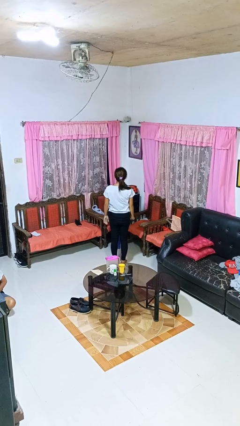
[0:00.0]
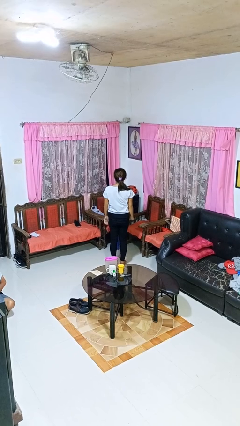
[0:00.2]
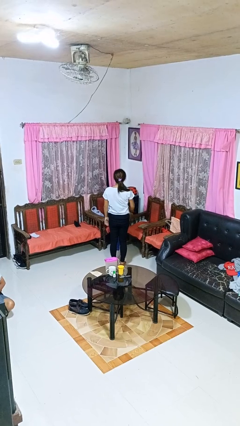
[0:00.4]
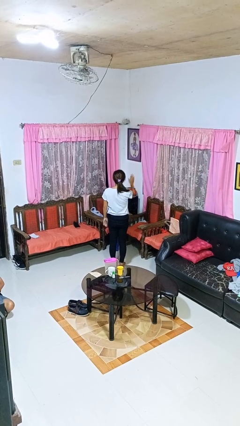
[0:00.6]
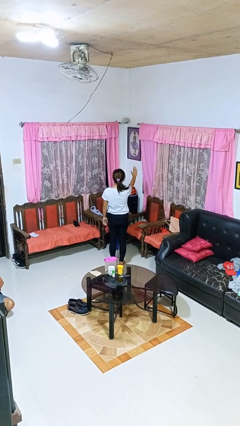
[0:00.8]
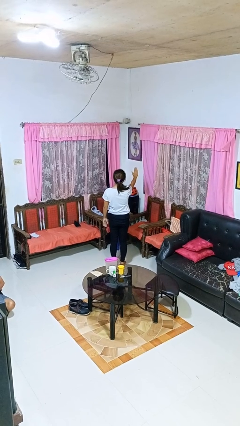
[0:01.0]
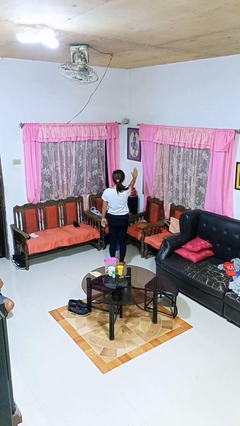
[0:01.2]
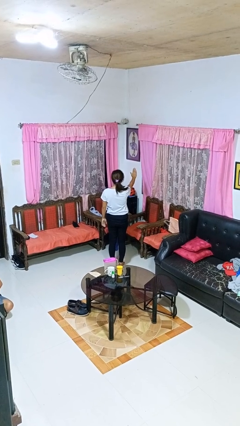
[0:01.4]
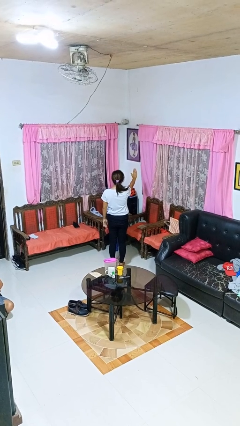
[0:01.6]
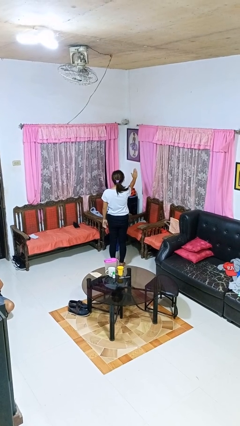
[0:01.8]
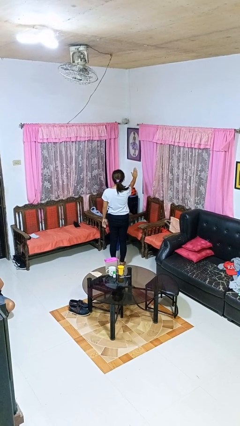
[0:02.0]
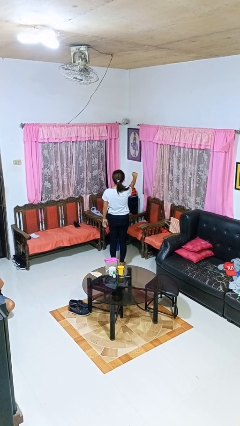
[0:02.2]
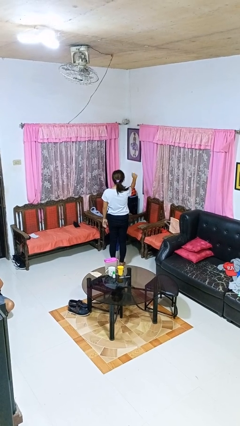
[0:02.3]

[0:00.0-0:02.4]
person gestures stop

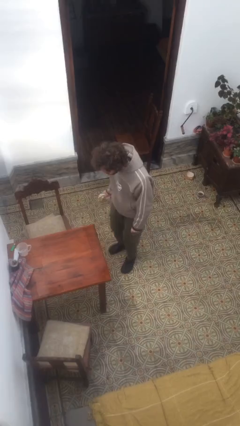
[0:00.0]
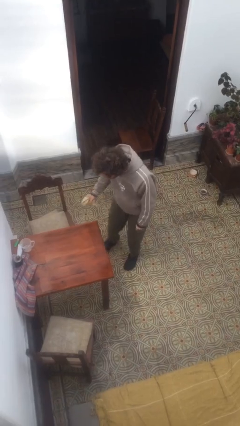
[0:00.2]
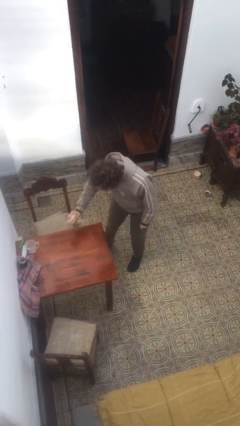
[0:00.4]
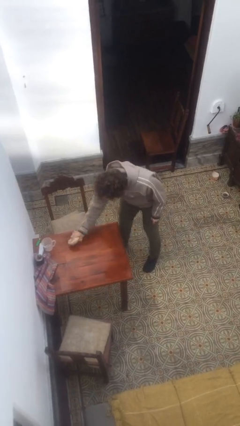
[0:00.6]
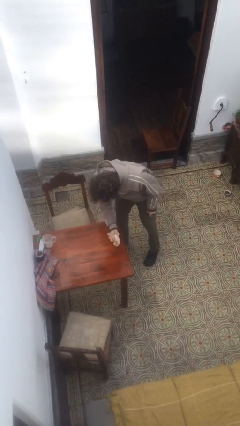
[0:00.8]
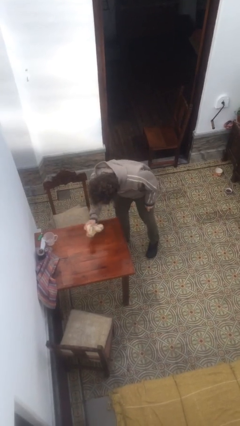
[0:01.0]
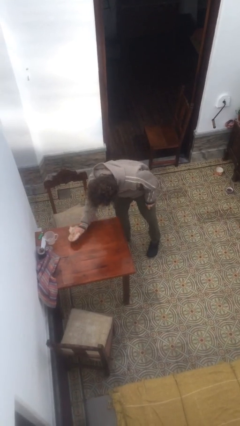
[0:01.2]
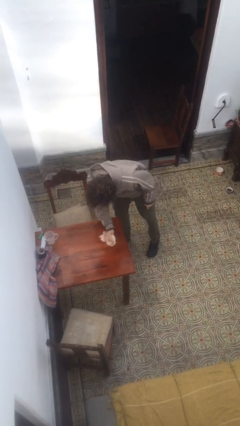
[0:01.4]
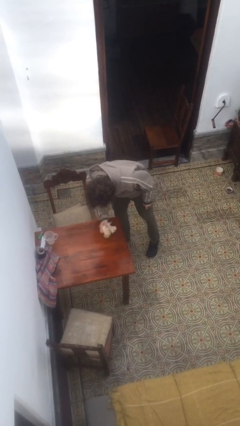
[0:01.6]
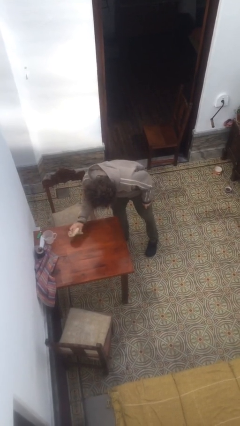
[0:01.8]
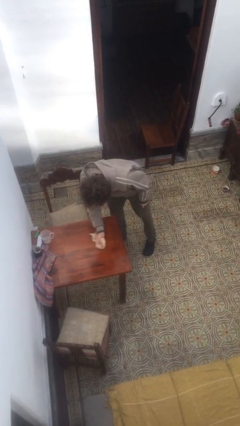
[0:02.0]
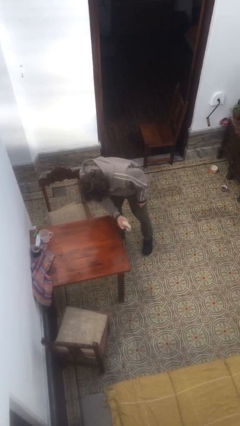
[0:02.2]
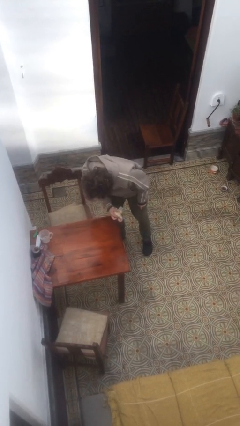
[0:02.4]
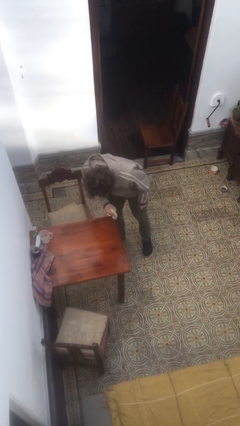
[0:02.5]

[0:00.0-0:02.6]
person cleans table with rag

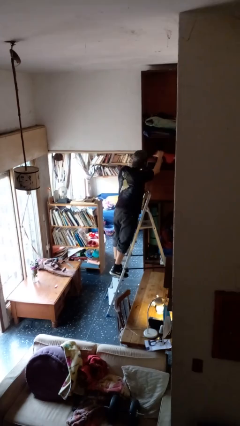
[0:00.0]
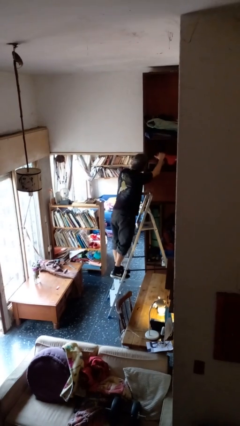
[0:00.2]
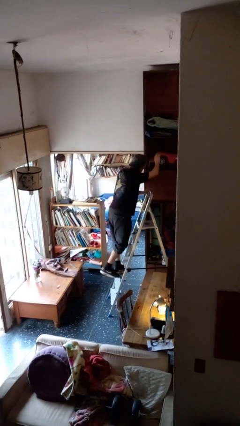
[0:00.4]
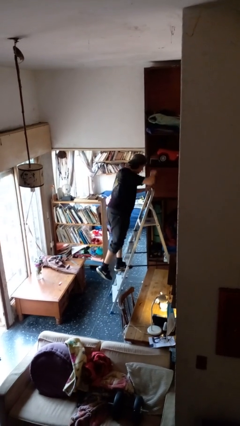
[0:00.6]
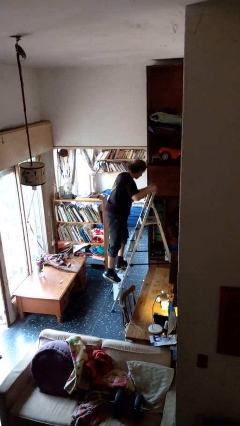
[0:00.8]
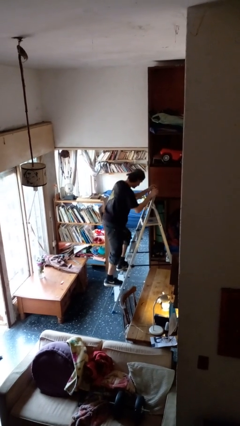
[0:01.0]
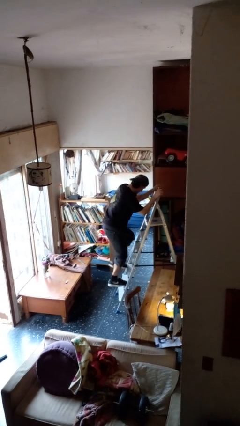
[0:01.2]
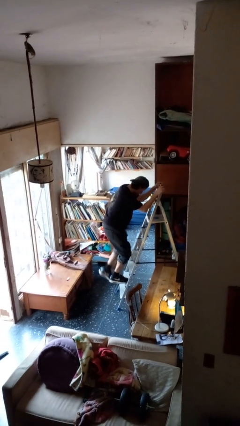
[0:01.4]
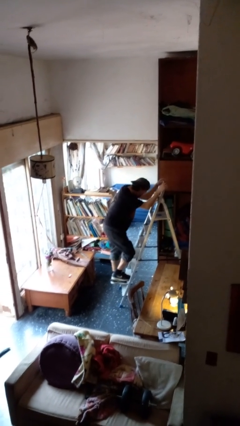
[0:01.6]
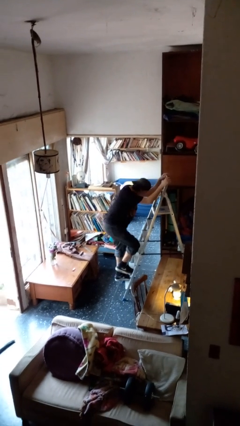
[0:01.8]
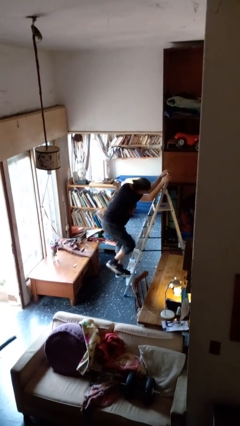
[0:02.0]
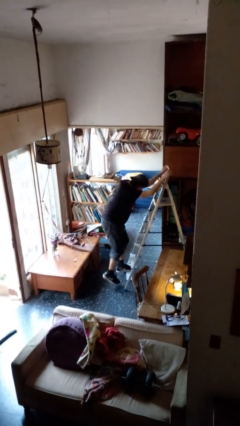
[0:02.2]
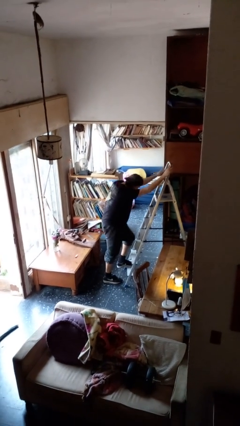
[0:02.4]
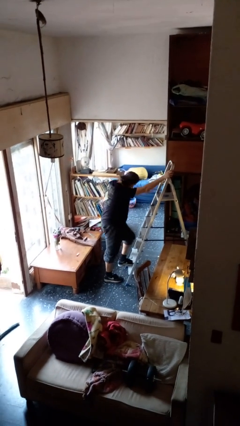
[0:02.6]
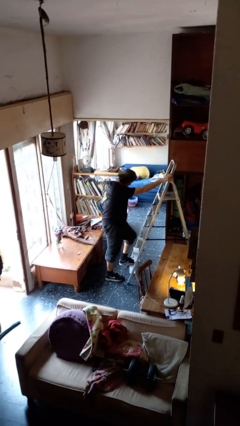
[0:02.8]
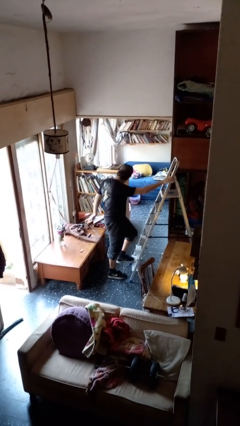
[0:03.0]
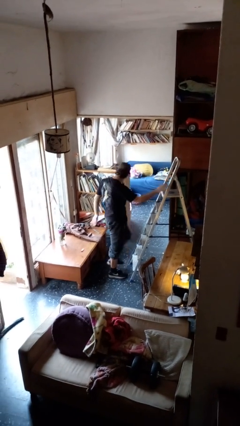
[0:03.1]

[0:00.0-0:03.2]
person climbs down ladder

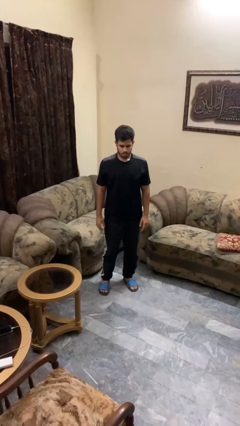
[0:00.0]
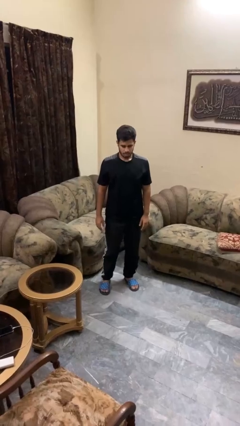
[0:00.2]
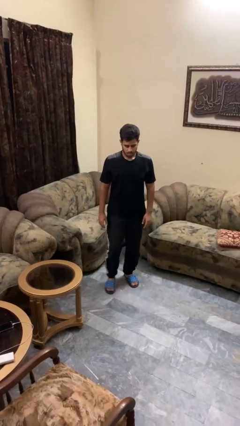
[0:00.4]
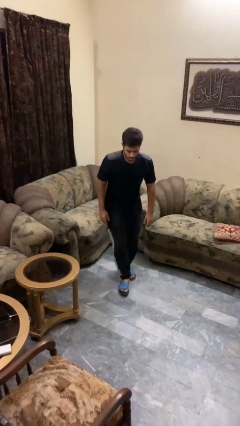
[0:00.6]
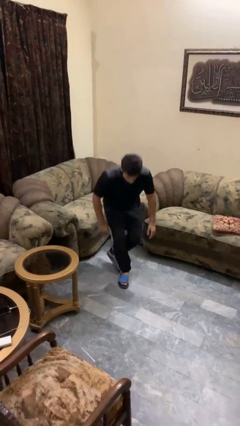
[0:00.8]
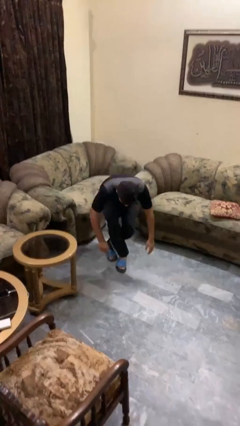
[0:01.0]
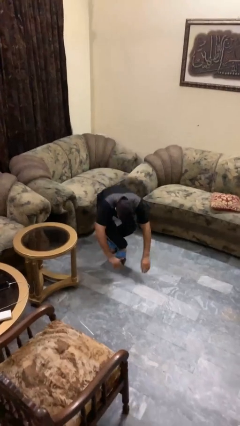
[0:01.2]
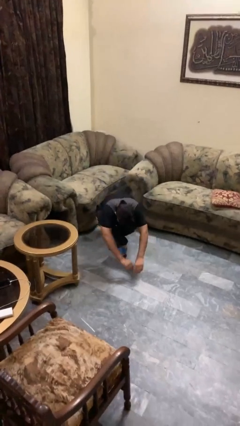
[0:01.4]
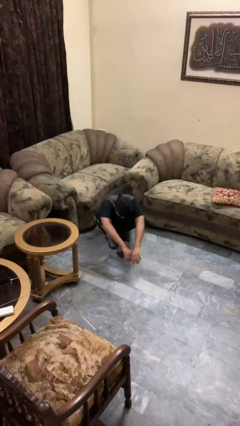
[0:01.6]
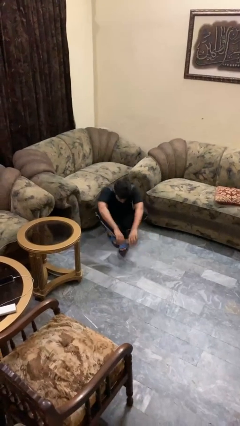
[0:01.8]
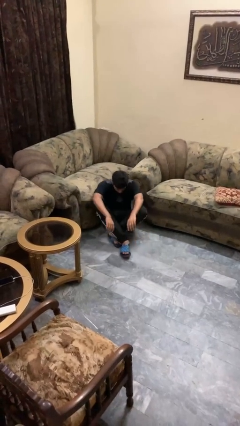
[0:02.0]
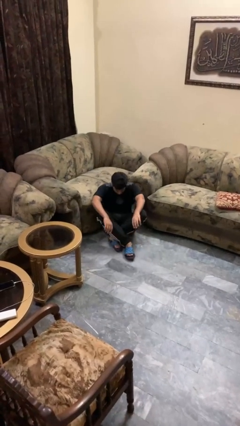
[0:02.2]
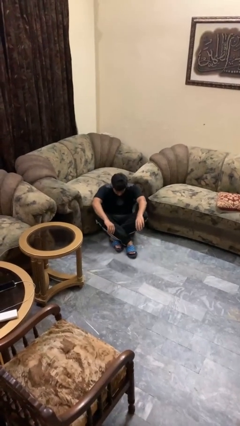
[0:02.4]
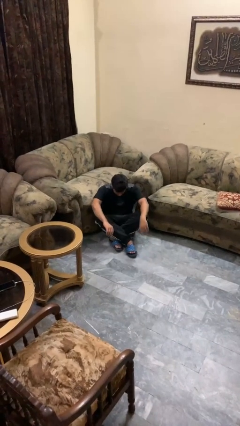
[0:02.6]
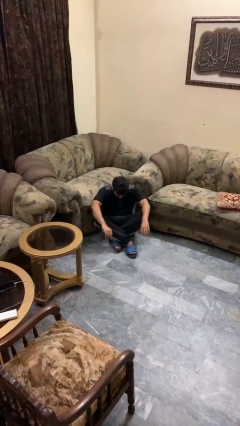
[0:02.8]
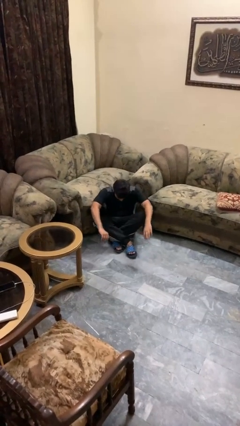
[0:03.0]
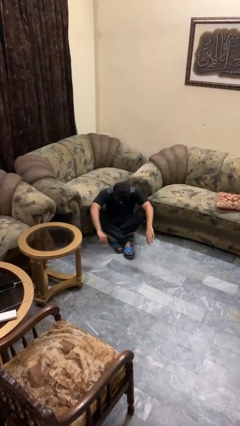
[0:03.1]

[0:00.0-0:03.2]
person sits crisscross

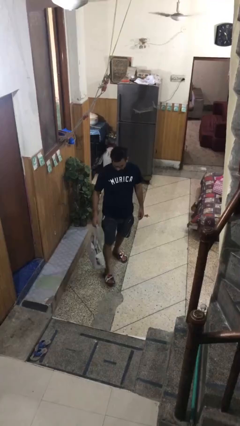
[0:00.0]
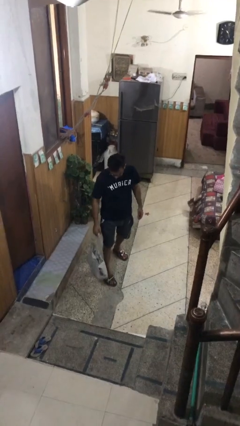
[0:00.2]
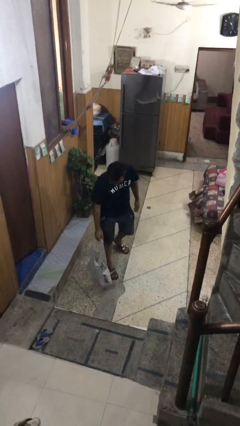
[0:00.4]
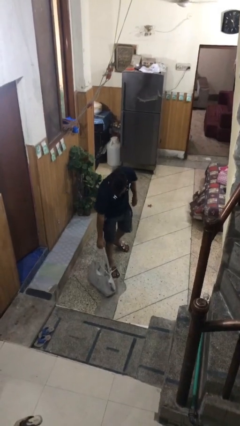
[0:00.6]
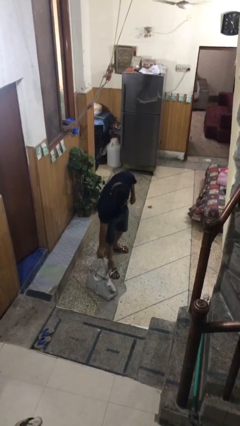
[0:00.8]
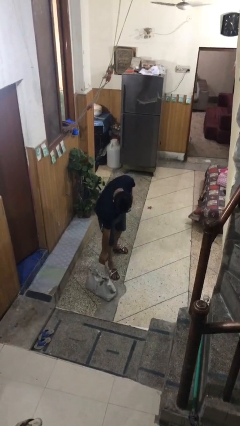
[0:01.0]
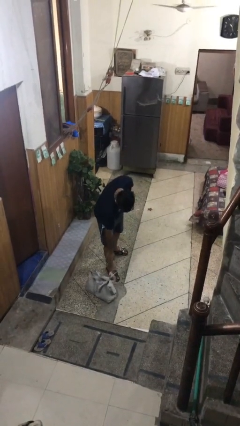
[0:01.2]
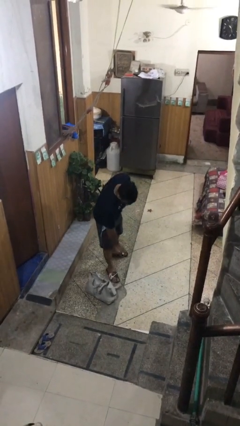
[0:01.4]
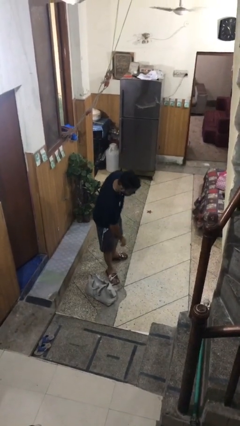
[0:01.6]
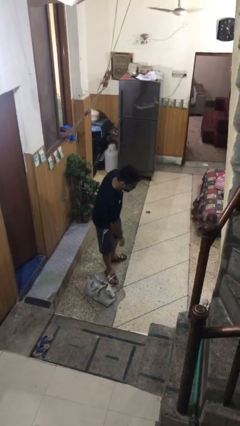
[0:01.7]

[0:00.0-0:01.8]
person puts down object on floor
